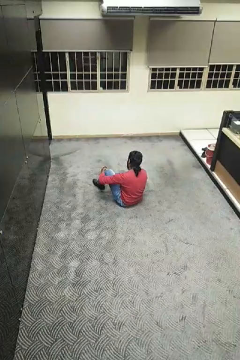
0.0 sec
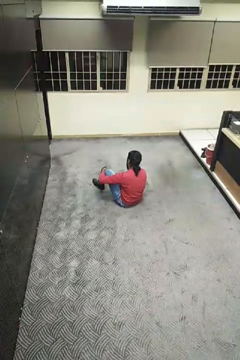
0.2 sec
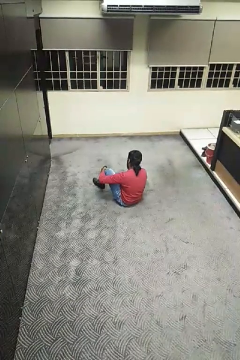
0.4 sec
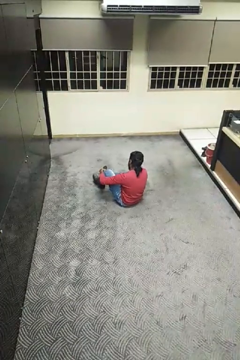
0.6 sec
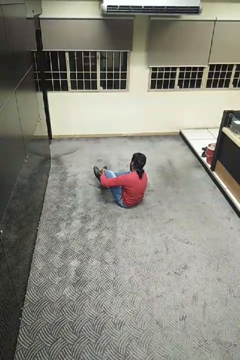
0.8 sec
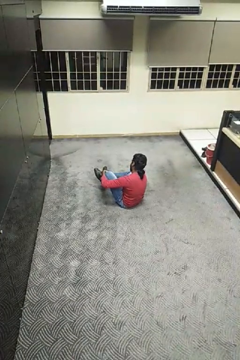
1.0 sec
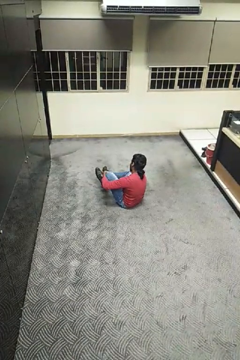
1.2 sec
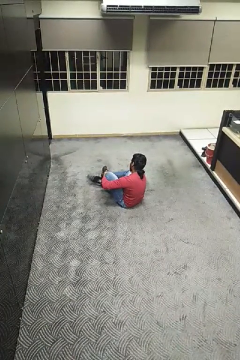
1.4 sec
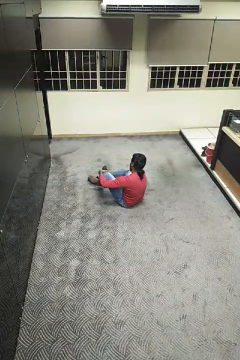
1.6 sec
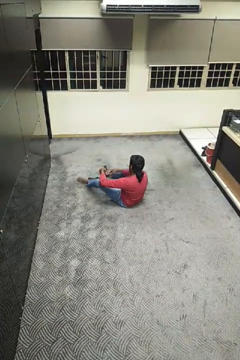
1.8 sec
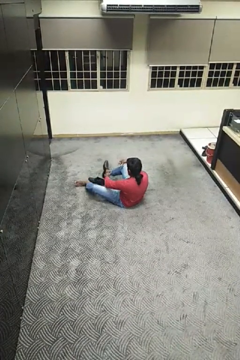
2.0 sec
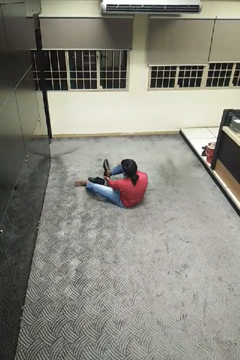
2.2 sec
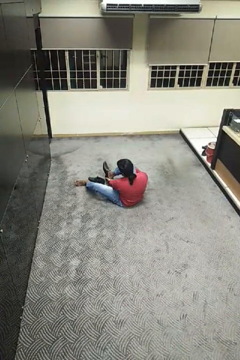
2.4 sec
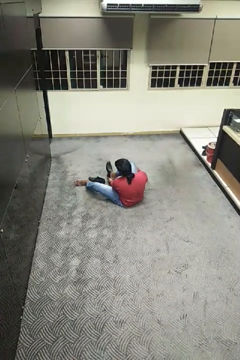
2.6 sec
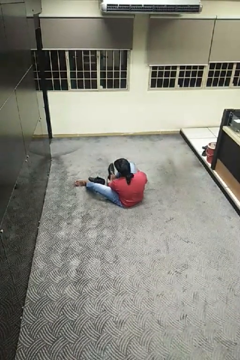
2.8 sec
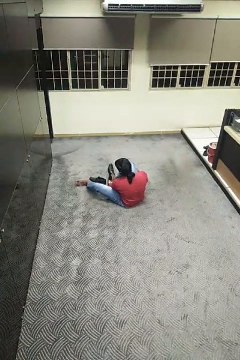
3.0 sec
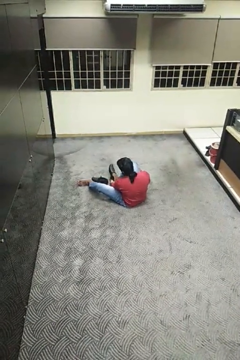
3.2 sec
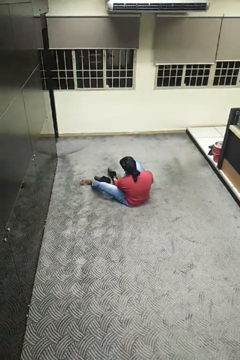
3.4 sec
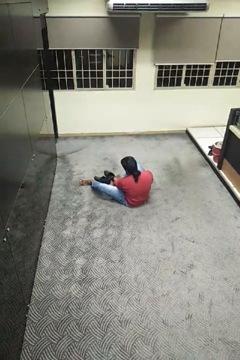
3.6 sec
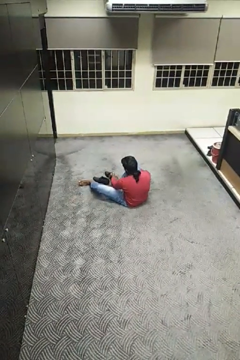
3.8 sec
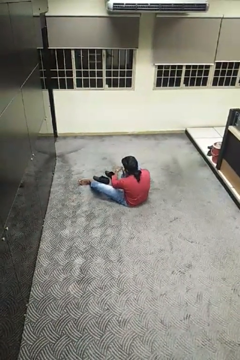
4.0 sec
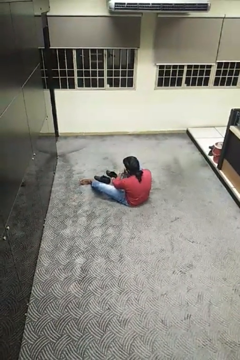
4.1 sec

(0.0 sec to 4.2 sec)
person takes off shoes

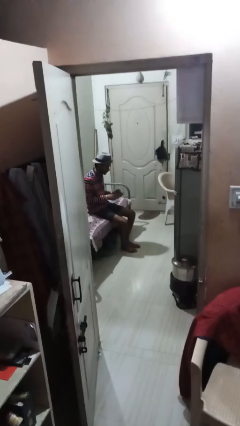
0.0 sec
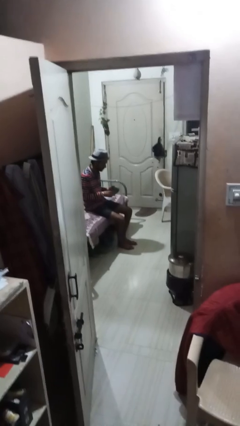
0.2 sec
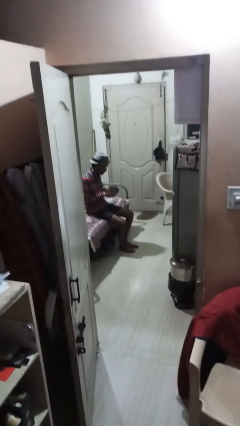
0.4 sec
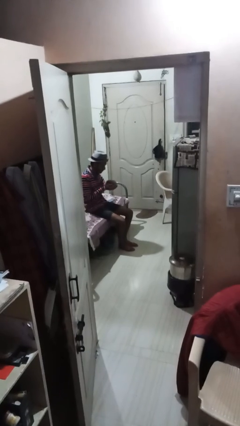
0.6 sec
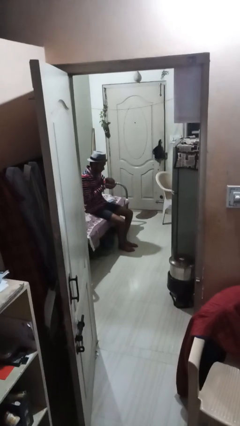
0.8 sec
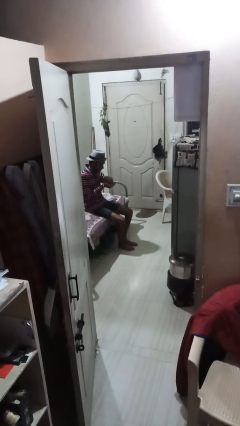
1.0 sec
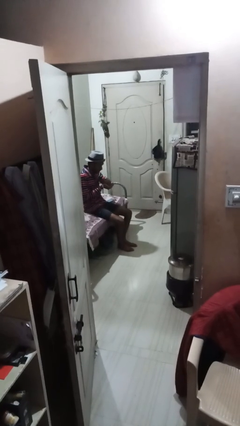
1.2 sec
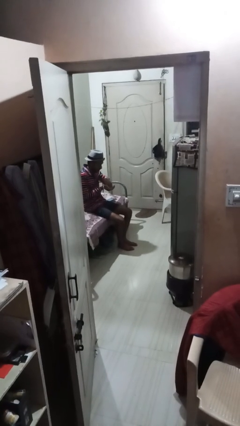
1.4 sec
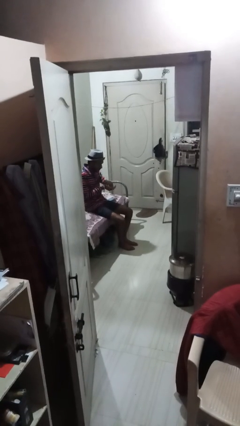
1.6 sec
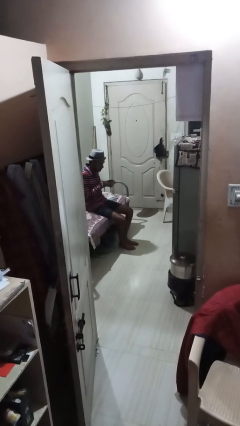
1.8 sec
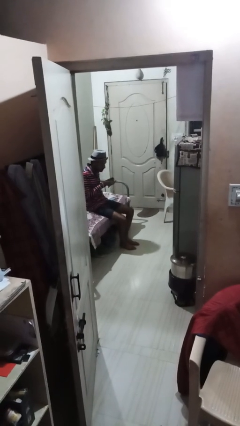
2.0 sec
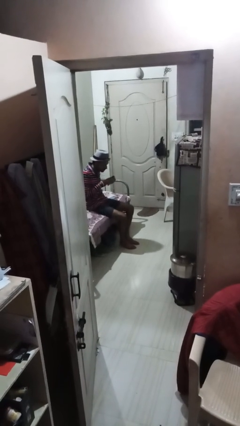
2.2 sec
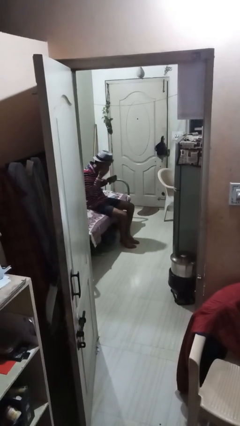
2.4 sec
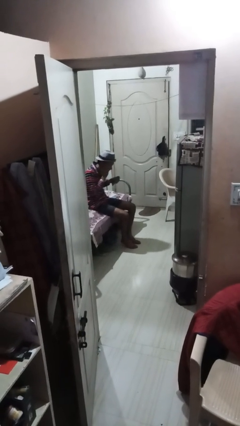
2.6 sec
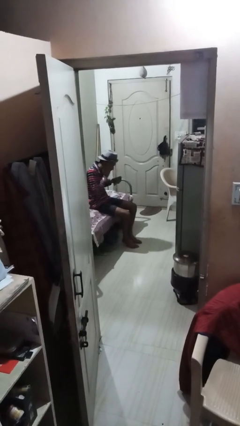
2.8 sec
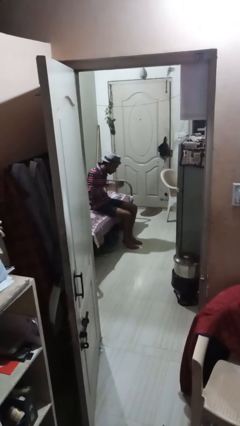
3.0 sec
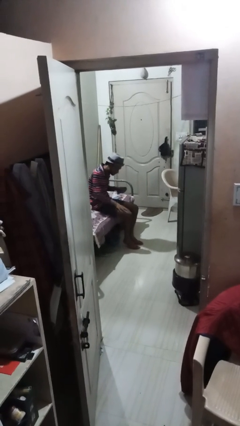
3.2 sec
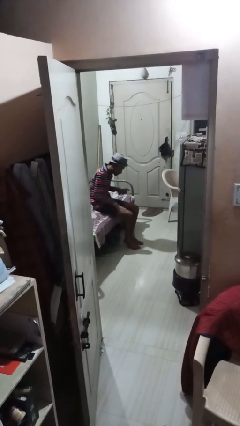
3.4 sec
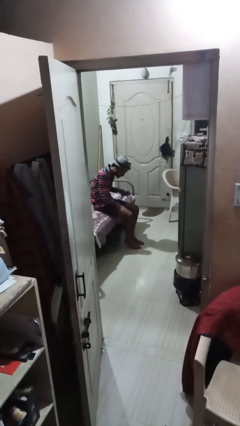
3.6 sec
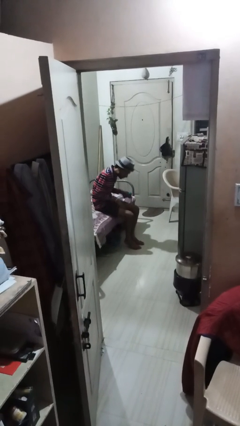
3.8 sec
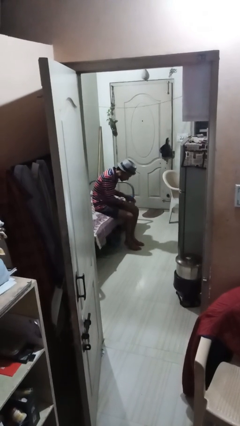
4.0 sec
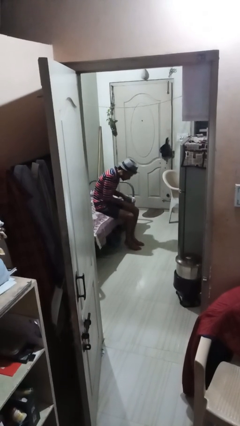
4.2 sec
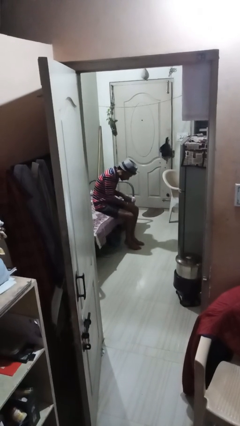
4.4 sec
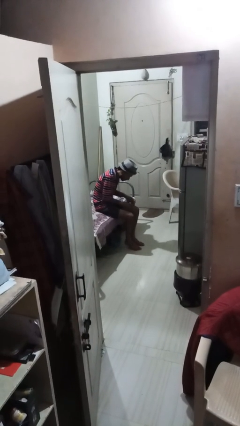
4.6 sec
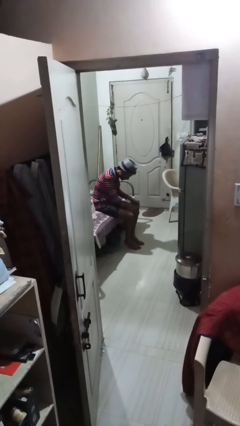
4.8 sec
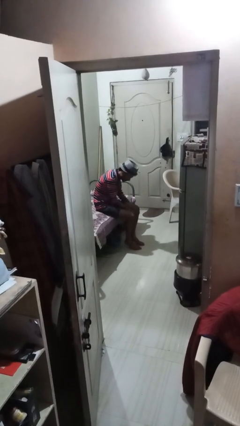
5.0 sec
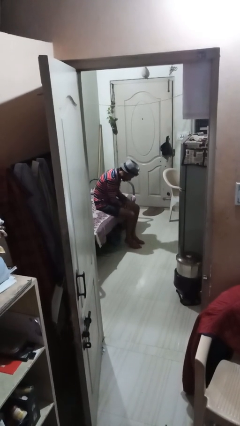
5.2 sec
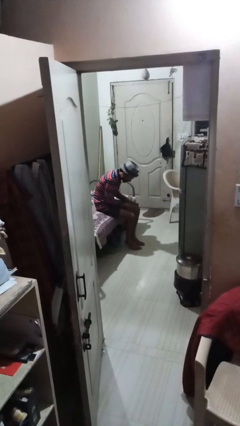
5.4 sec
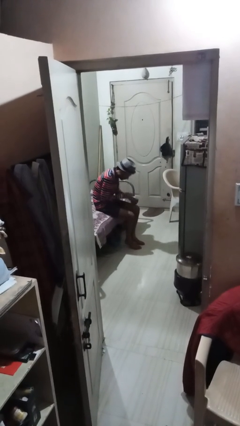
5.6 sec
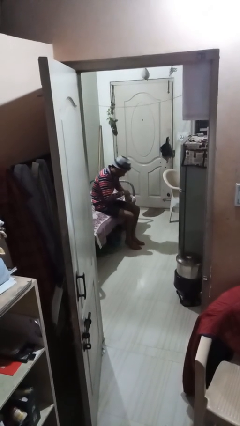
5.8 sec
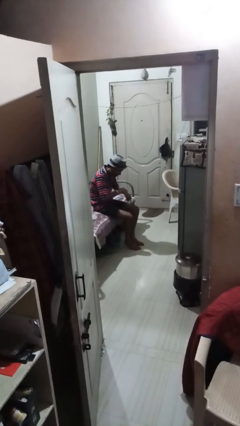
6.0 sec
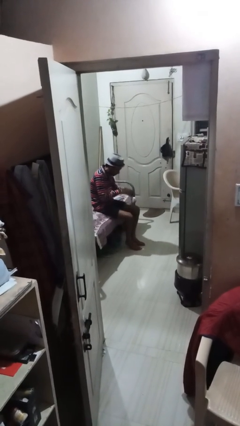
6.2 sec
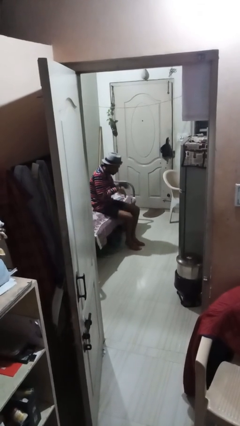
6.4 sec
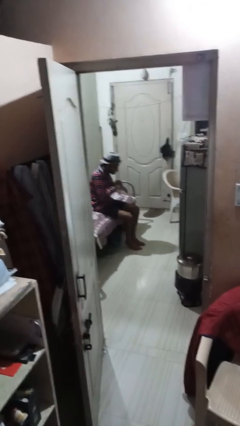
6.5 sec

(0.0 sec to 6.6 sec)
person applies facial moisturizer

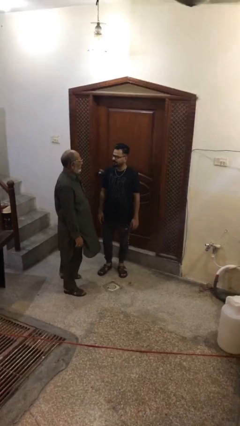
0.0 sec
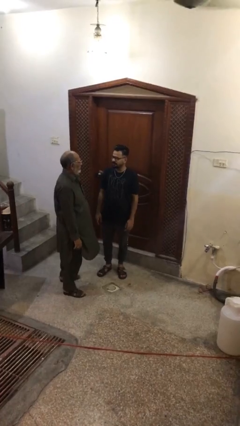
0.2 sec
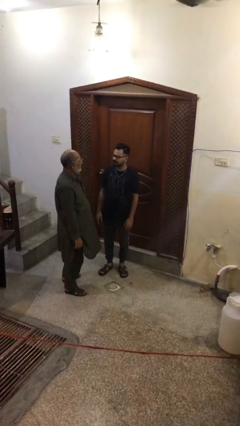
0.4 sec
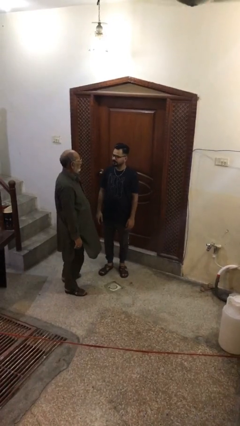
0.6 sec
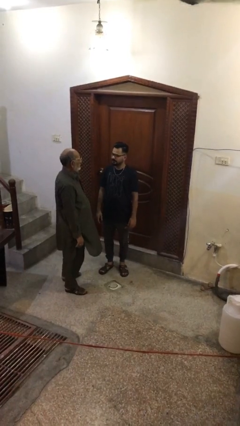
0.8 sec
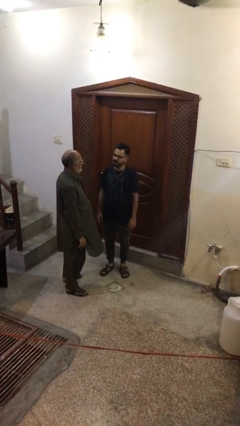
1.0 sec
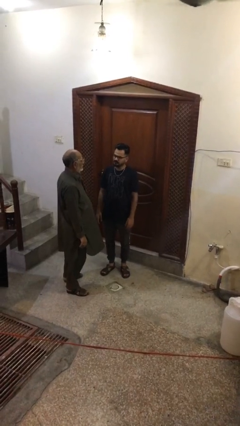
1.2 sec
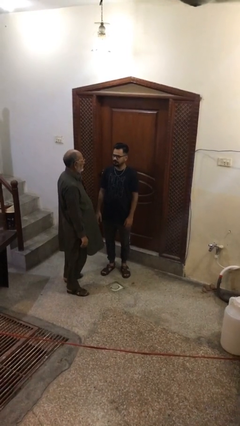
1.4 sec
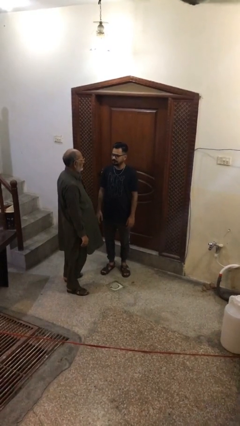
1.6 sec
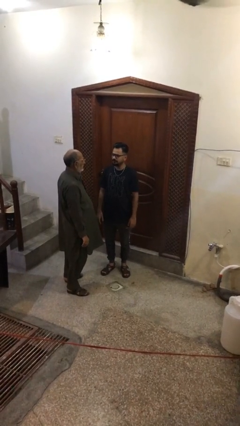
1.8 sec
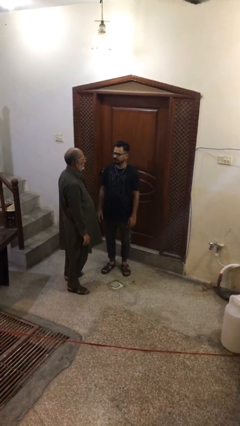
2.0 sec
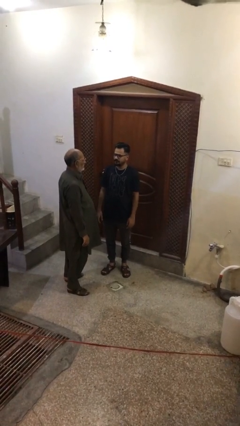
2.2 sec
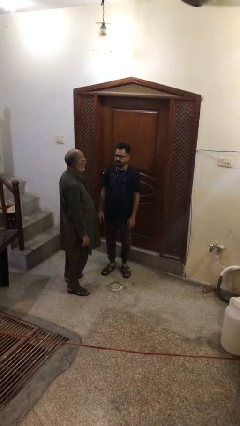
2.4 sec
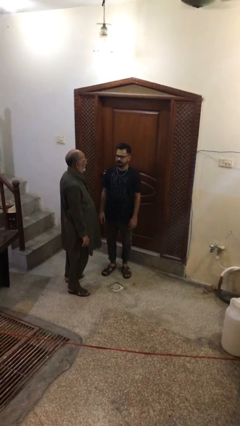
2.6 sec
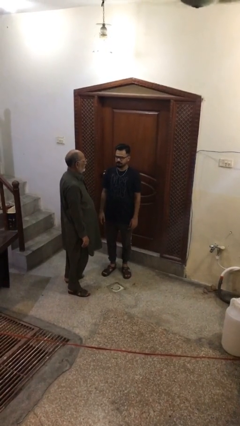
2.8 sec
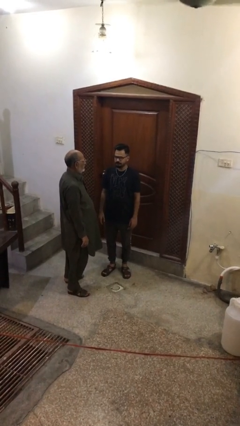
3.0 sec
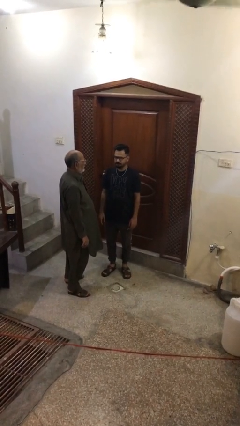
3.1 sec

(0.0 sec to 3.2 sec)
person talks to person

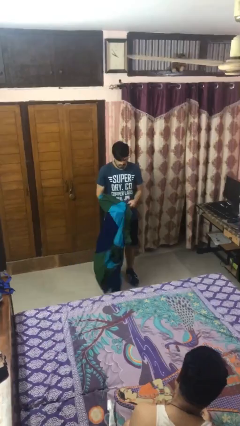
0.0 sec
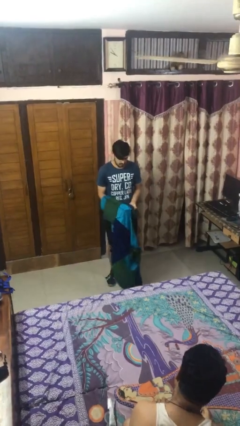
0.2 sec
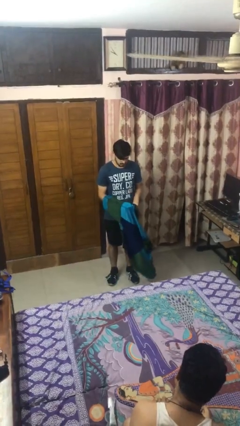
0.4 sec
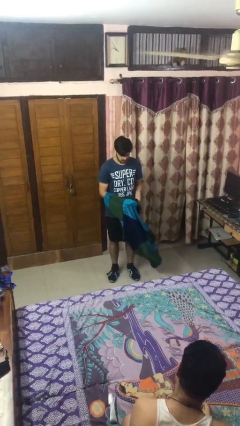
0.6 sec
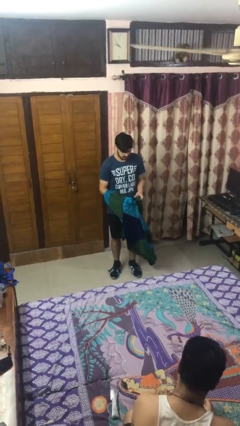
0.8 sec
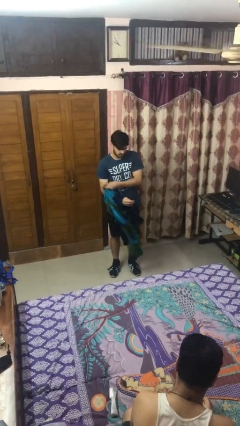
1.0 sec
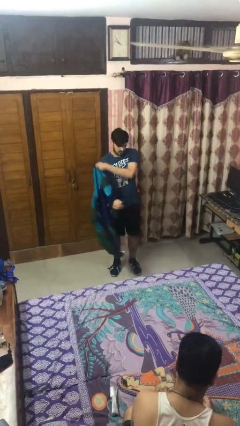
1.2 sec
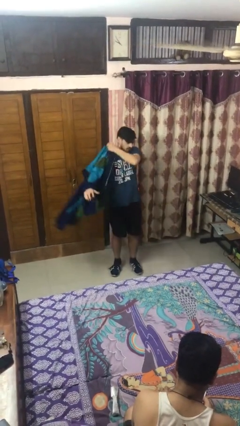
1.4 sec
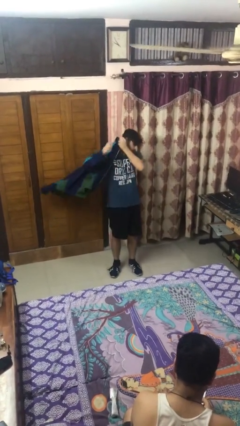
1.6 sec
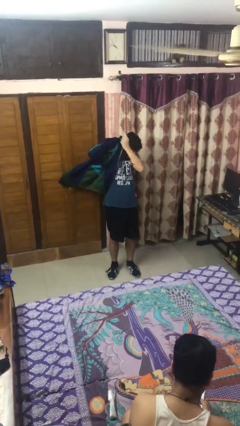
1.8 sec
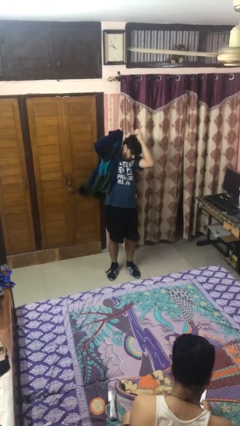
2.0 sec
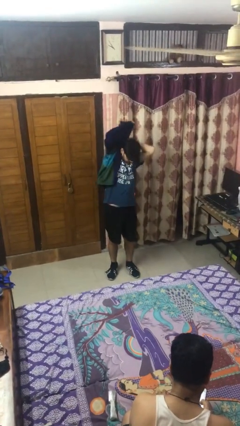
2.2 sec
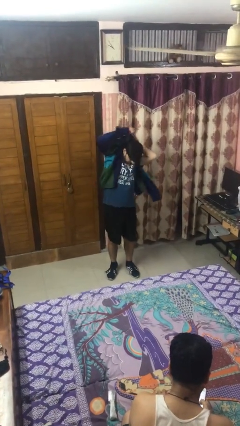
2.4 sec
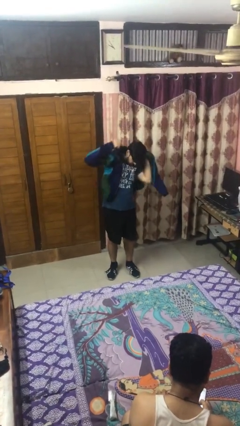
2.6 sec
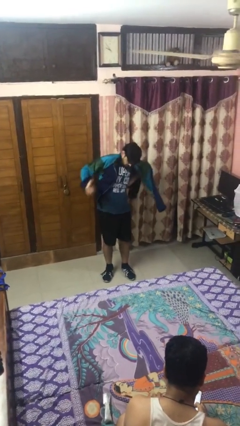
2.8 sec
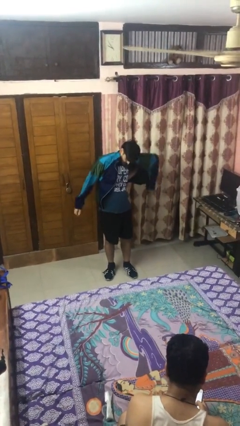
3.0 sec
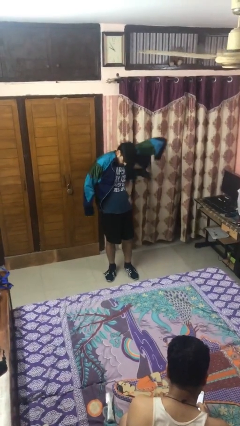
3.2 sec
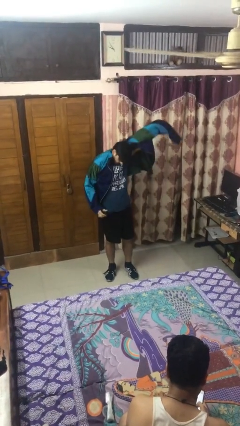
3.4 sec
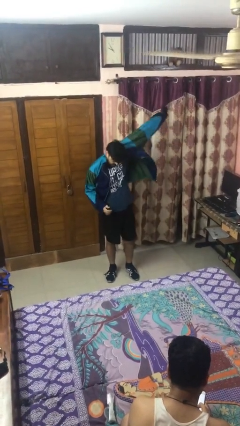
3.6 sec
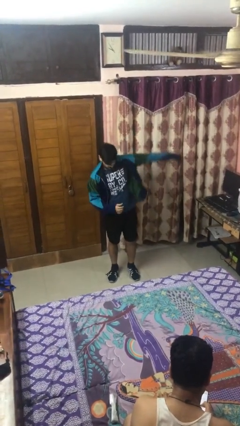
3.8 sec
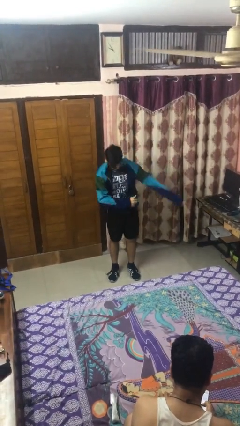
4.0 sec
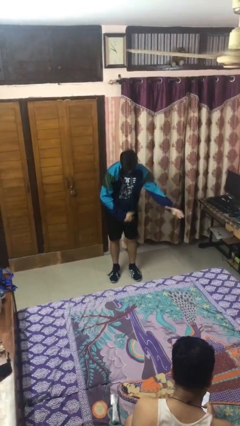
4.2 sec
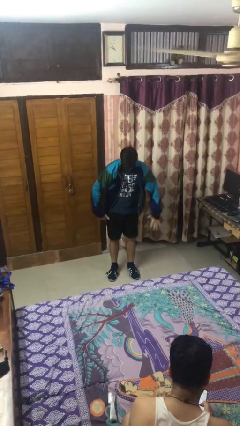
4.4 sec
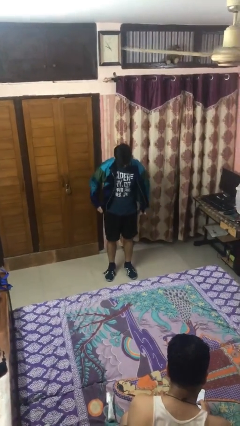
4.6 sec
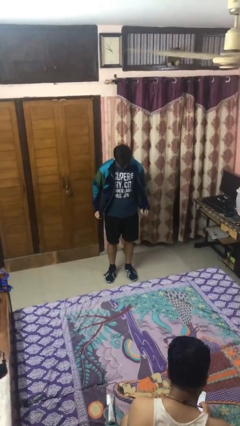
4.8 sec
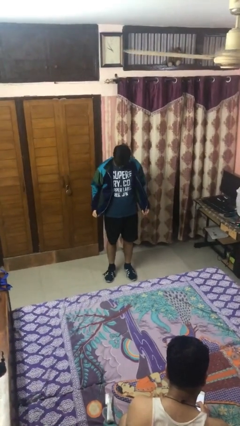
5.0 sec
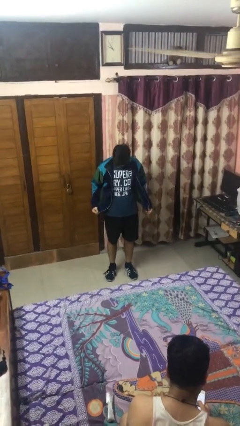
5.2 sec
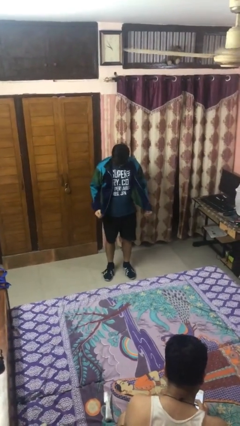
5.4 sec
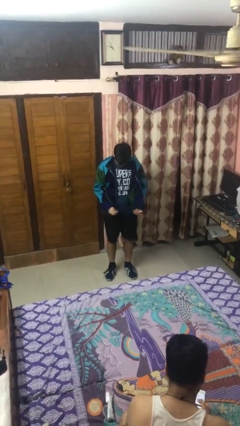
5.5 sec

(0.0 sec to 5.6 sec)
person puts on jacket
